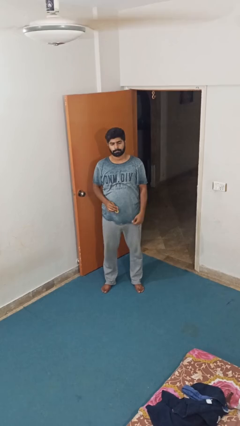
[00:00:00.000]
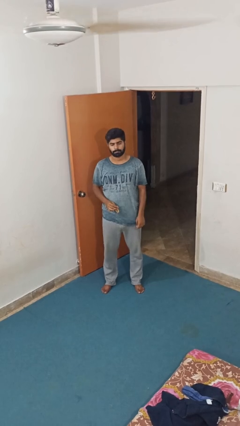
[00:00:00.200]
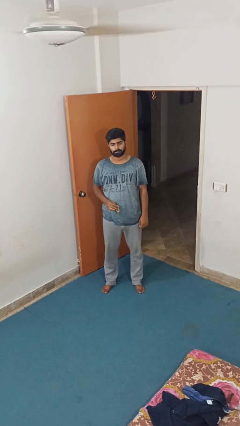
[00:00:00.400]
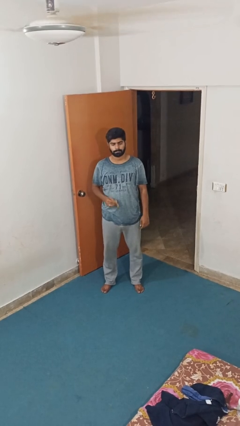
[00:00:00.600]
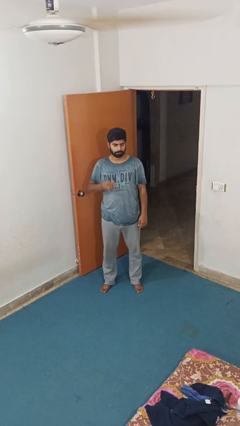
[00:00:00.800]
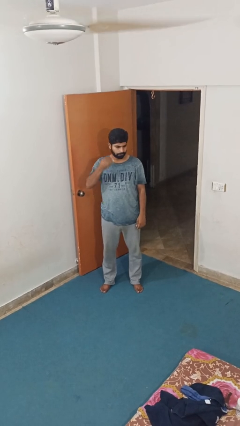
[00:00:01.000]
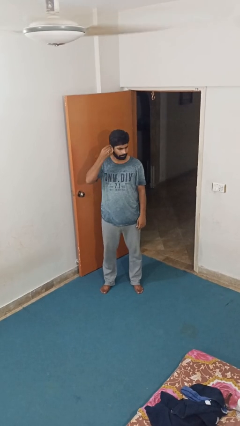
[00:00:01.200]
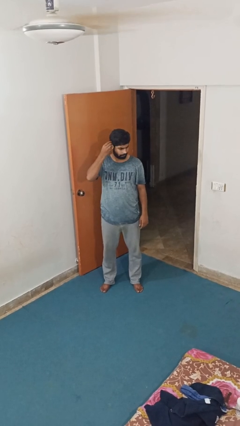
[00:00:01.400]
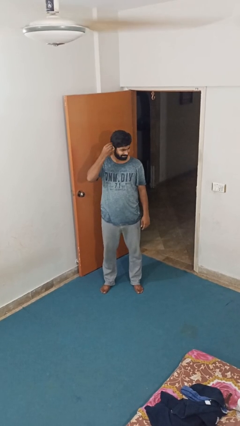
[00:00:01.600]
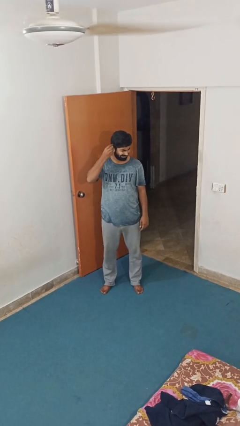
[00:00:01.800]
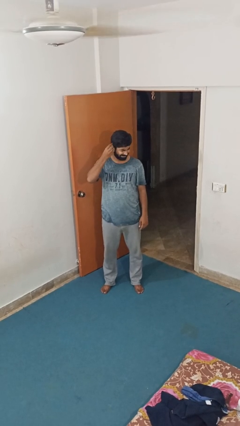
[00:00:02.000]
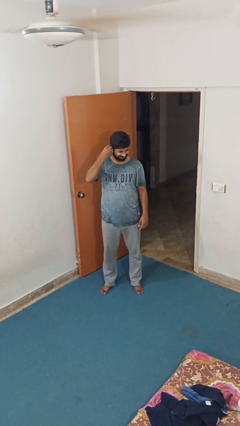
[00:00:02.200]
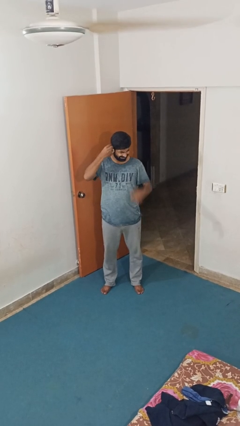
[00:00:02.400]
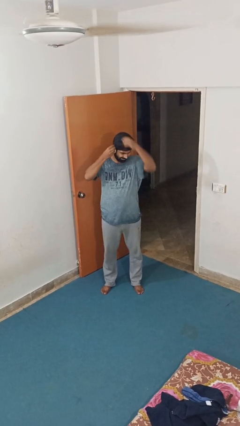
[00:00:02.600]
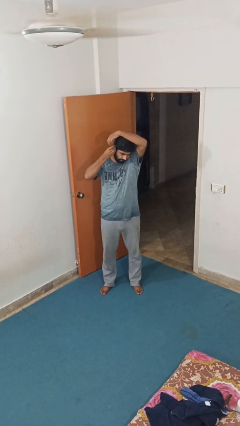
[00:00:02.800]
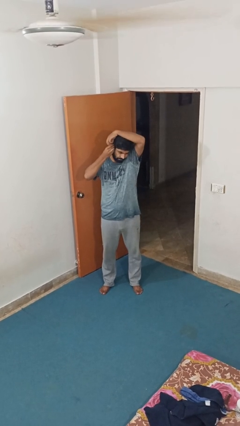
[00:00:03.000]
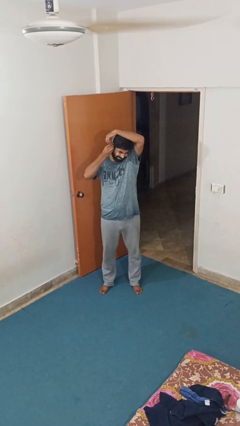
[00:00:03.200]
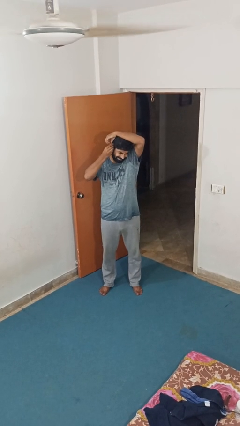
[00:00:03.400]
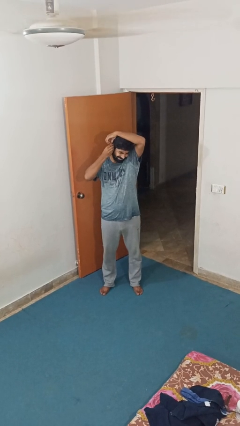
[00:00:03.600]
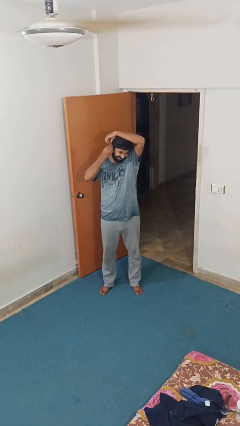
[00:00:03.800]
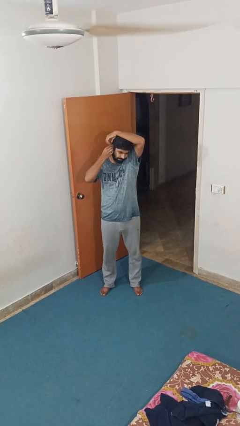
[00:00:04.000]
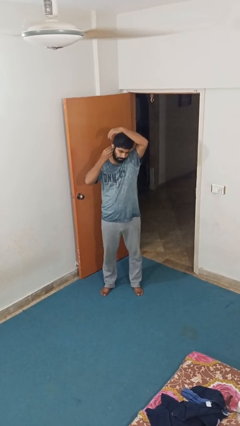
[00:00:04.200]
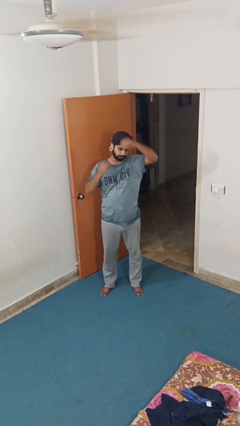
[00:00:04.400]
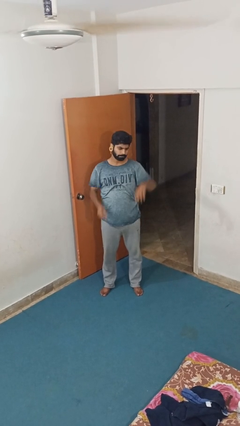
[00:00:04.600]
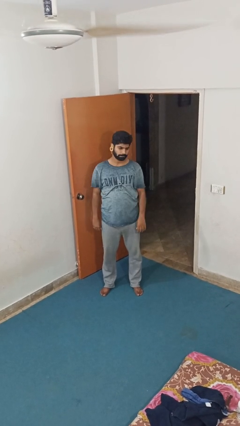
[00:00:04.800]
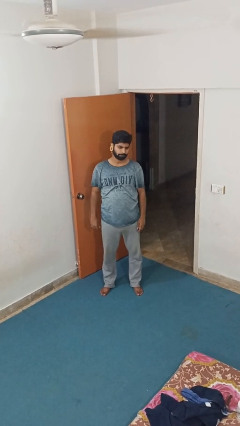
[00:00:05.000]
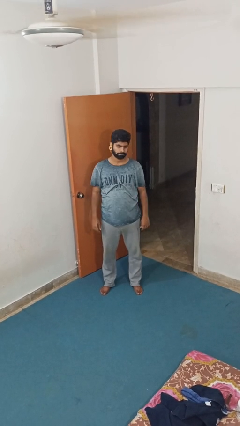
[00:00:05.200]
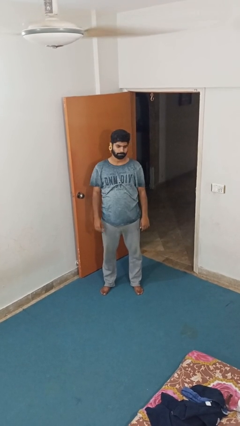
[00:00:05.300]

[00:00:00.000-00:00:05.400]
person puts on earrings

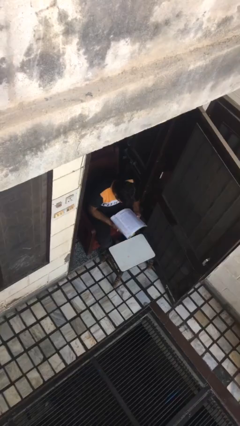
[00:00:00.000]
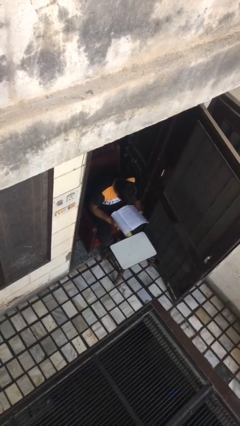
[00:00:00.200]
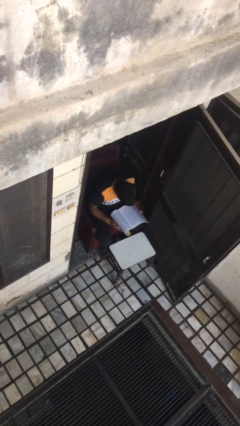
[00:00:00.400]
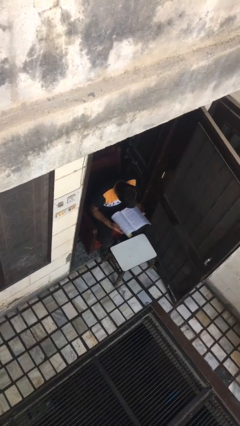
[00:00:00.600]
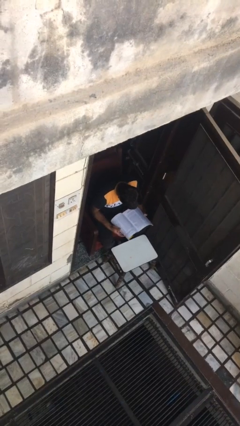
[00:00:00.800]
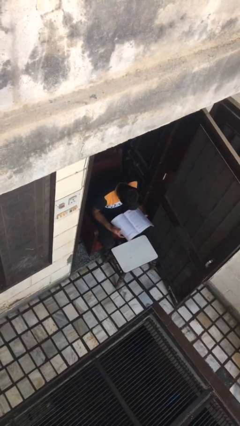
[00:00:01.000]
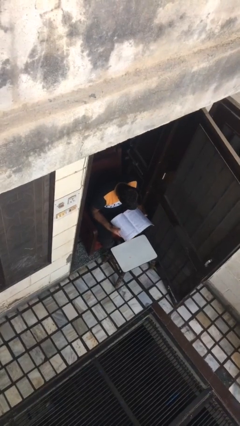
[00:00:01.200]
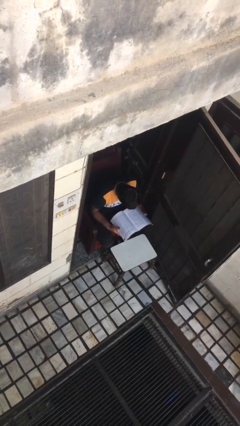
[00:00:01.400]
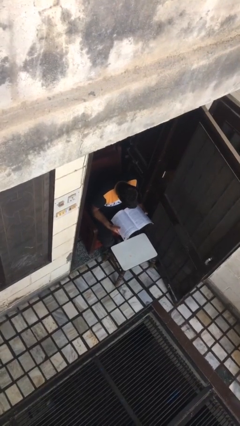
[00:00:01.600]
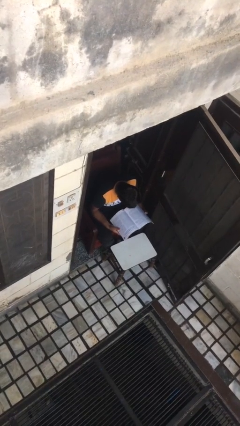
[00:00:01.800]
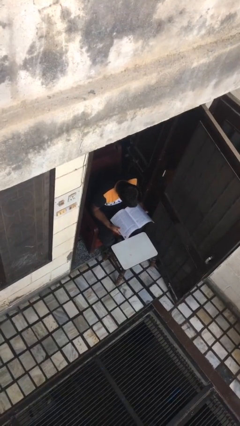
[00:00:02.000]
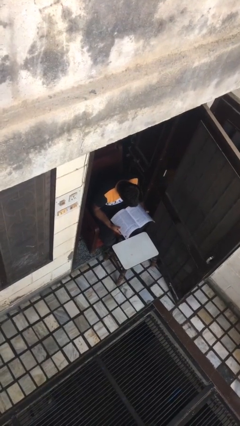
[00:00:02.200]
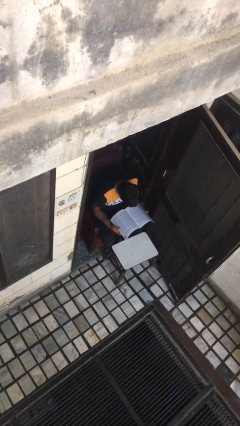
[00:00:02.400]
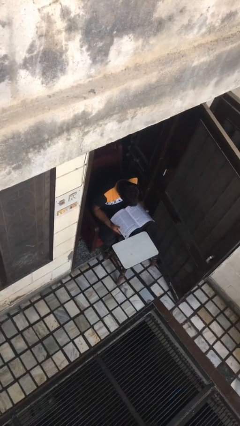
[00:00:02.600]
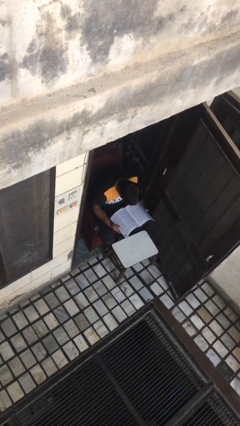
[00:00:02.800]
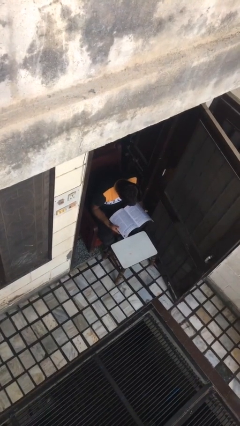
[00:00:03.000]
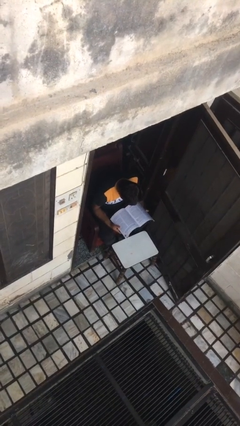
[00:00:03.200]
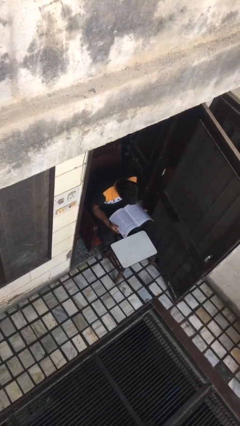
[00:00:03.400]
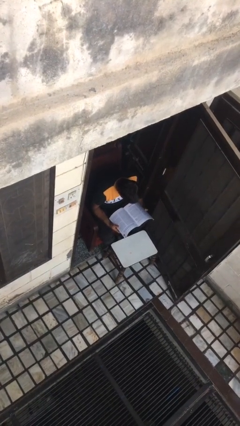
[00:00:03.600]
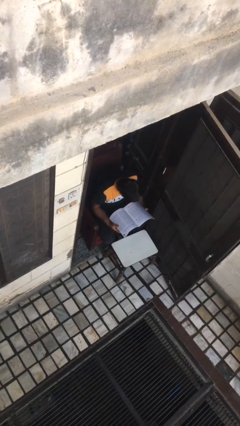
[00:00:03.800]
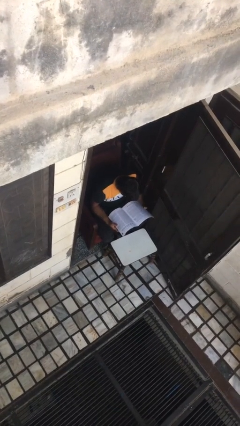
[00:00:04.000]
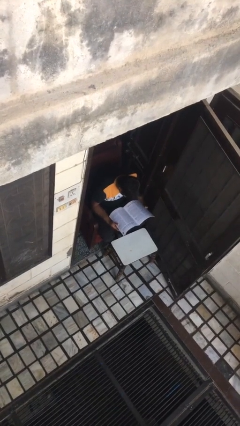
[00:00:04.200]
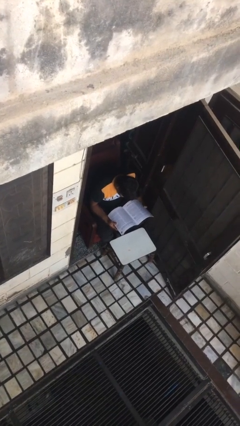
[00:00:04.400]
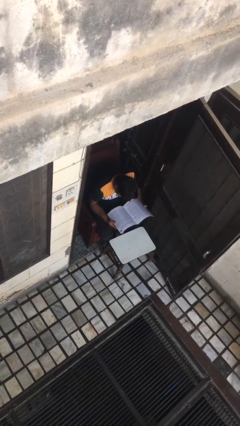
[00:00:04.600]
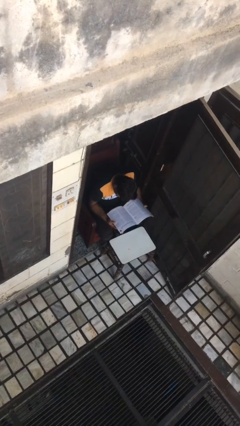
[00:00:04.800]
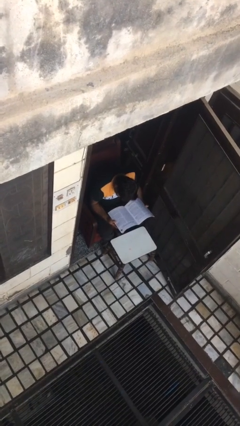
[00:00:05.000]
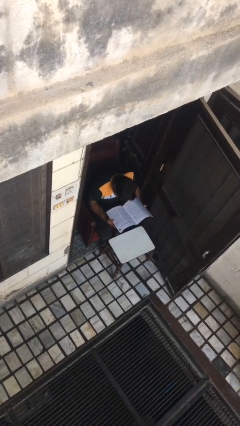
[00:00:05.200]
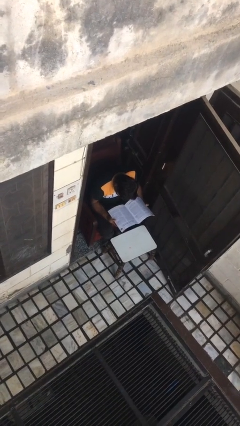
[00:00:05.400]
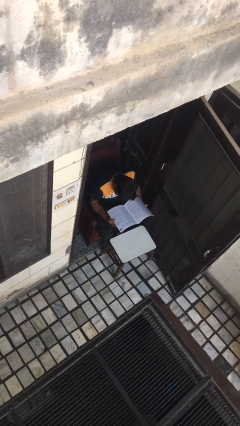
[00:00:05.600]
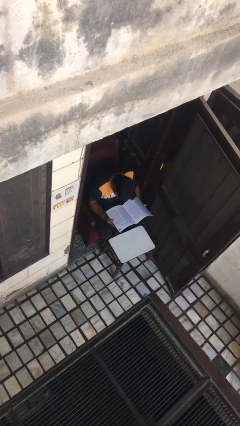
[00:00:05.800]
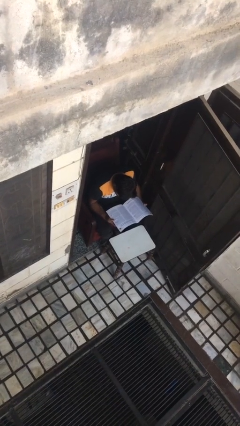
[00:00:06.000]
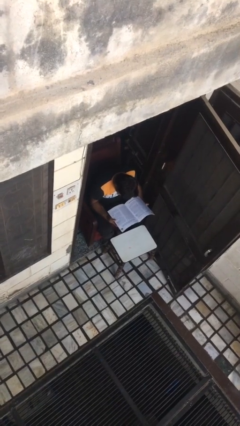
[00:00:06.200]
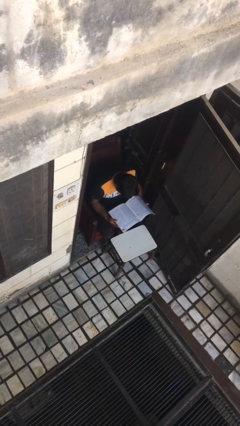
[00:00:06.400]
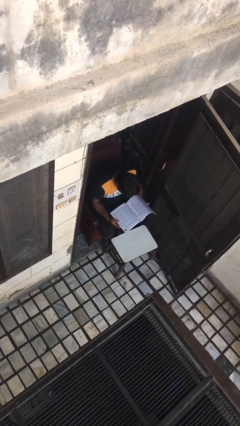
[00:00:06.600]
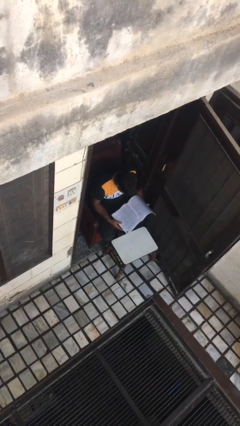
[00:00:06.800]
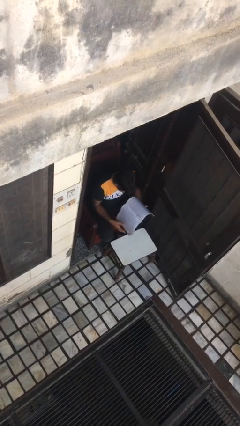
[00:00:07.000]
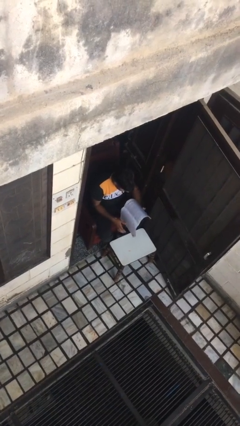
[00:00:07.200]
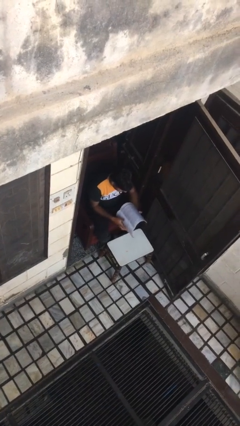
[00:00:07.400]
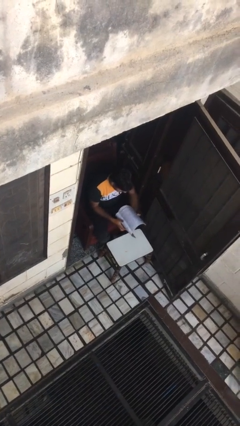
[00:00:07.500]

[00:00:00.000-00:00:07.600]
person reads document

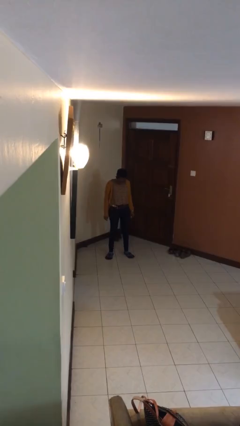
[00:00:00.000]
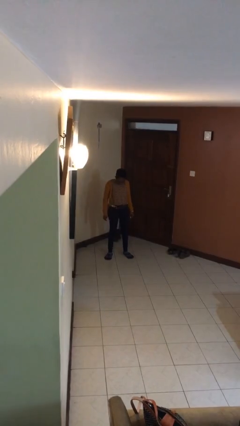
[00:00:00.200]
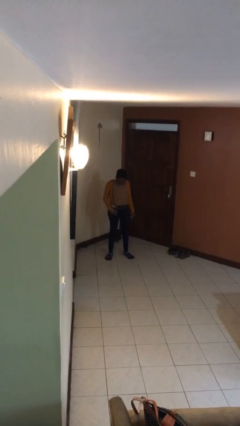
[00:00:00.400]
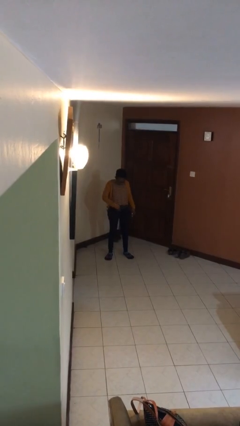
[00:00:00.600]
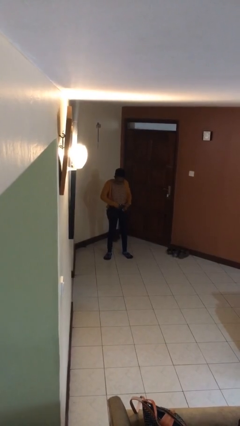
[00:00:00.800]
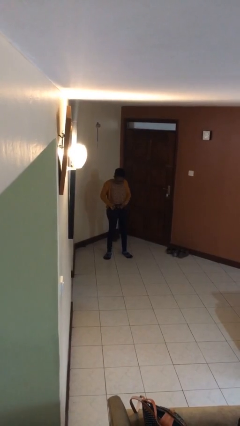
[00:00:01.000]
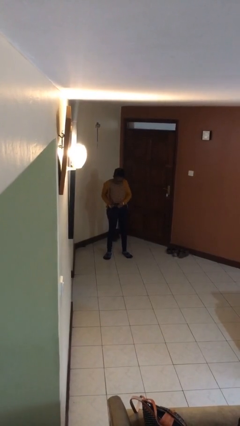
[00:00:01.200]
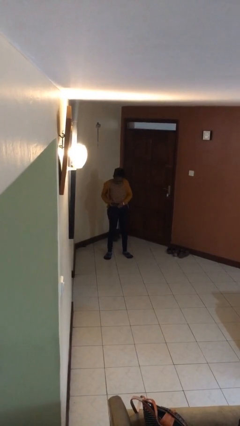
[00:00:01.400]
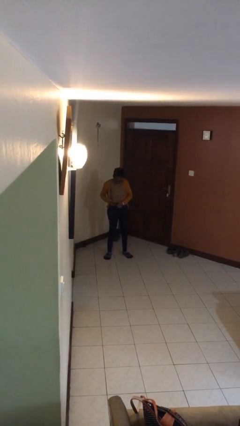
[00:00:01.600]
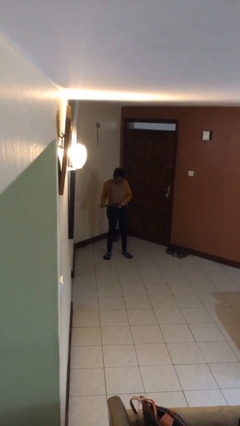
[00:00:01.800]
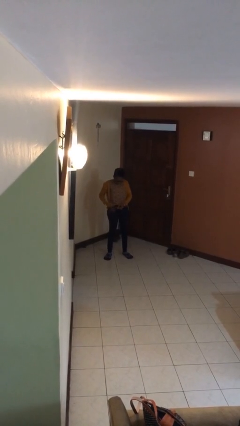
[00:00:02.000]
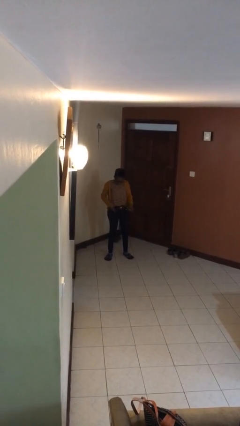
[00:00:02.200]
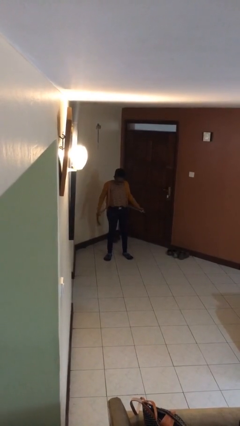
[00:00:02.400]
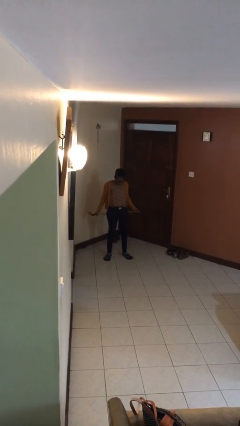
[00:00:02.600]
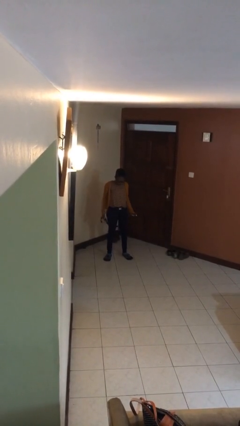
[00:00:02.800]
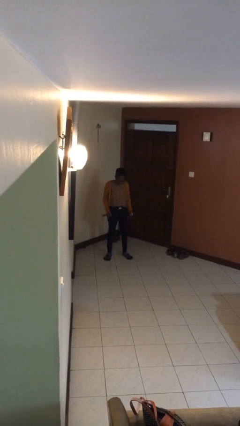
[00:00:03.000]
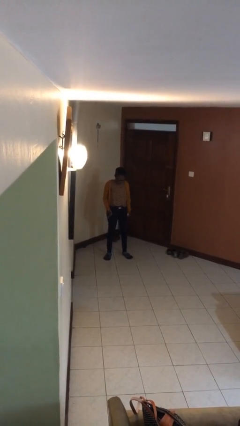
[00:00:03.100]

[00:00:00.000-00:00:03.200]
person takes off belt

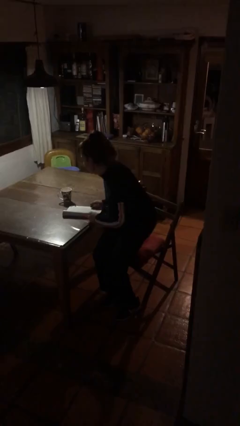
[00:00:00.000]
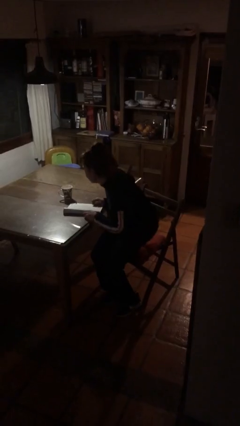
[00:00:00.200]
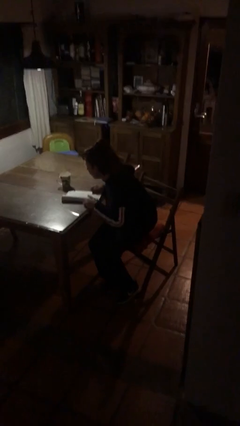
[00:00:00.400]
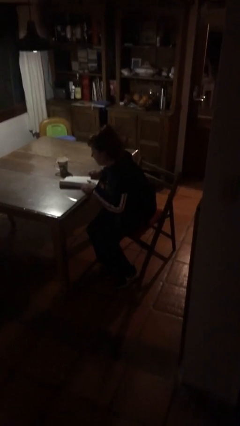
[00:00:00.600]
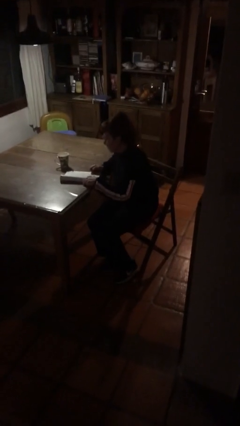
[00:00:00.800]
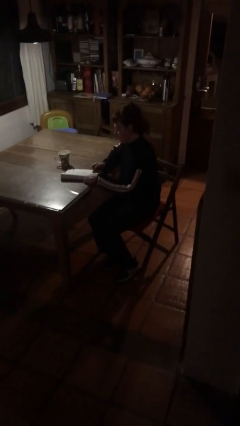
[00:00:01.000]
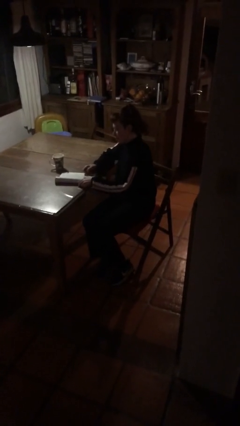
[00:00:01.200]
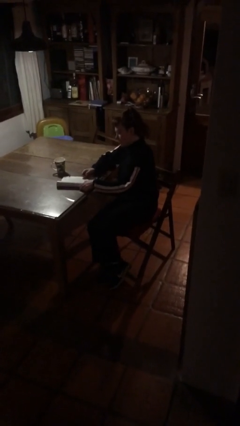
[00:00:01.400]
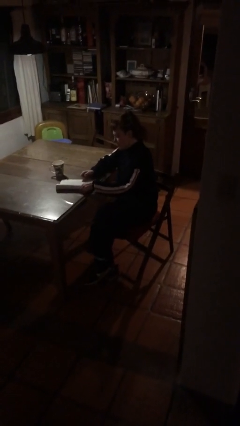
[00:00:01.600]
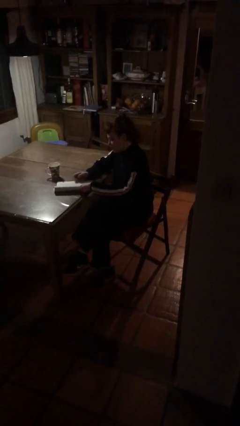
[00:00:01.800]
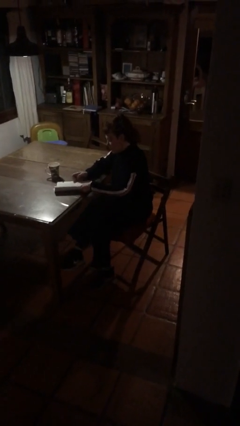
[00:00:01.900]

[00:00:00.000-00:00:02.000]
person sits down
